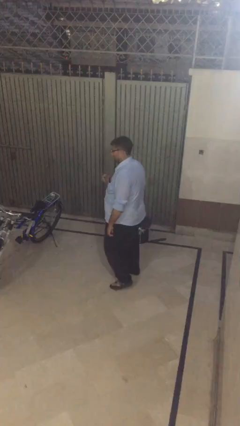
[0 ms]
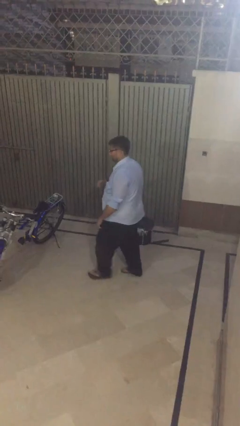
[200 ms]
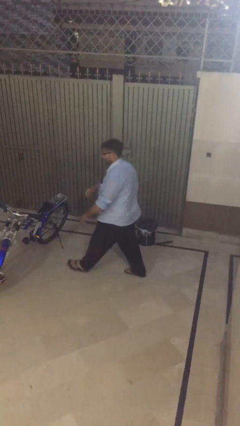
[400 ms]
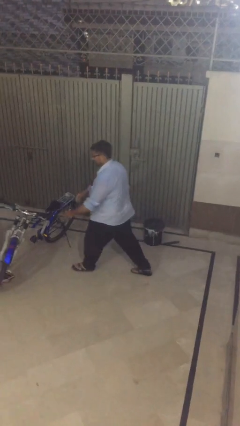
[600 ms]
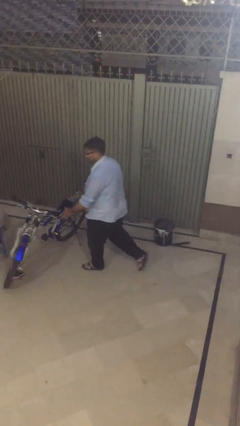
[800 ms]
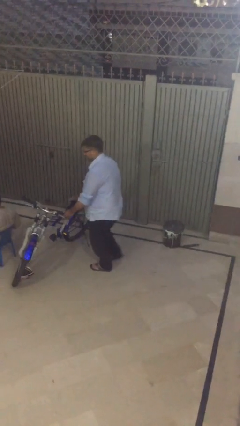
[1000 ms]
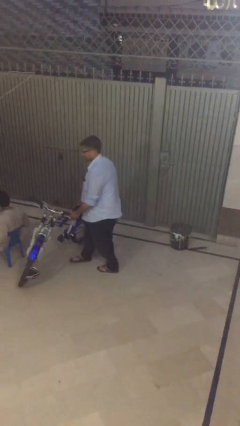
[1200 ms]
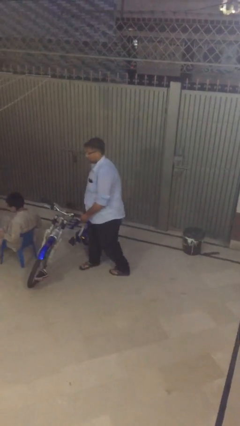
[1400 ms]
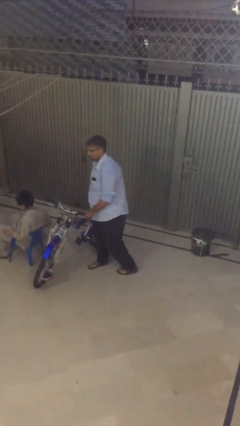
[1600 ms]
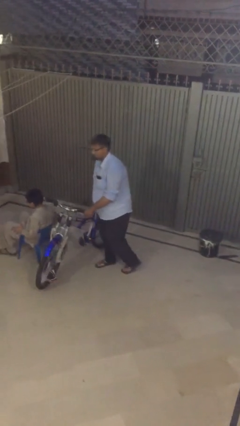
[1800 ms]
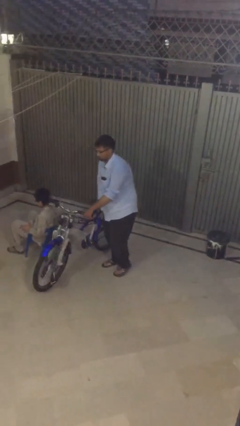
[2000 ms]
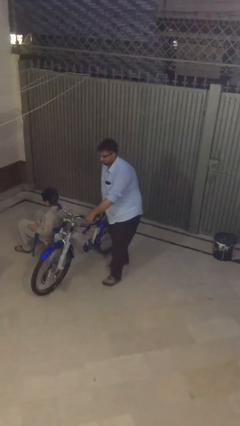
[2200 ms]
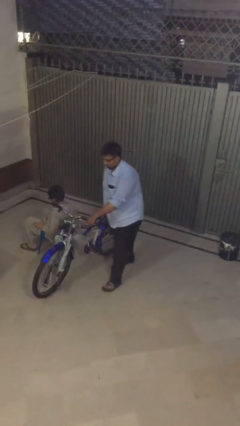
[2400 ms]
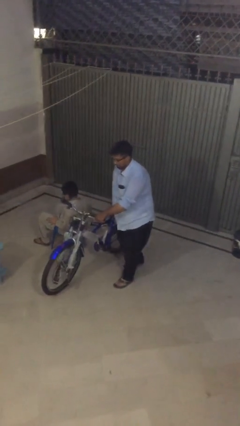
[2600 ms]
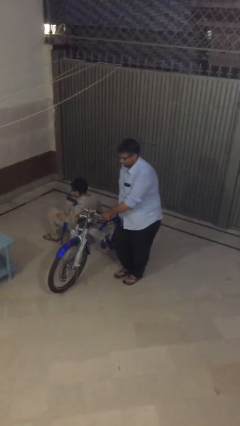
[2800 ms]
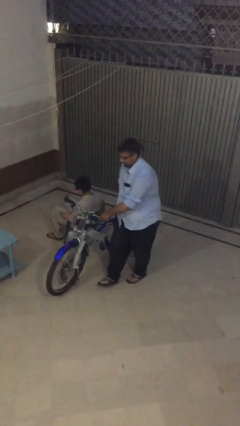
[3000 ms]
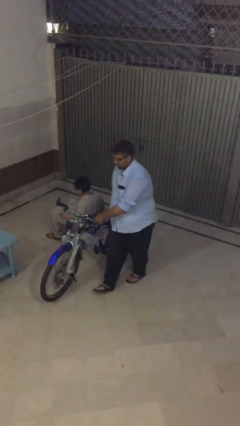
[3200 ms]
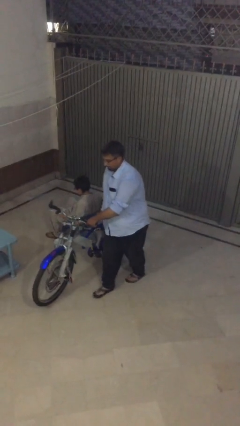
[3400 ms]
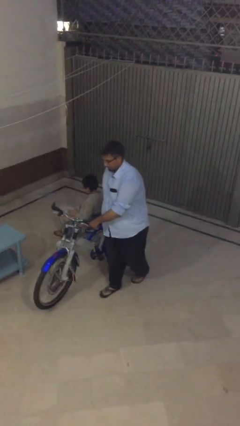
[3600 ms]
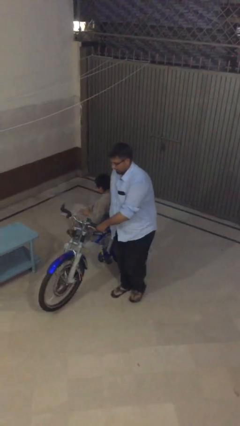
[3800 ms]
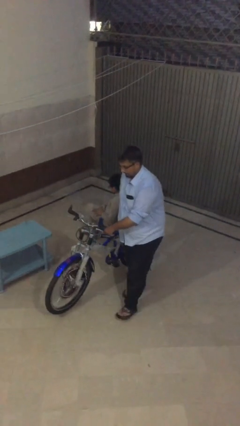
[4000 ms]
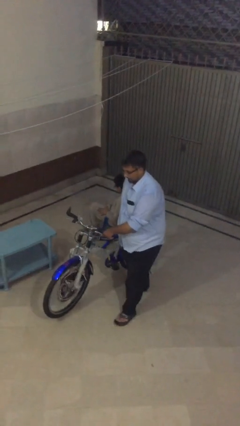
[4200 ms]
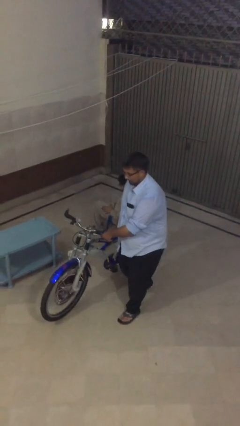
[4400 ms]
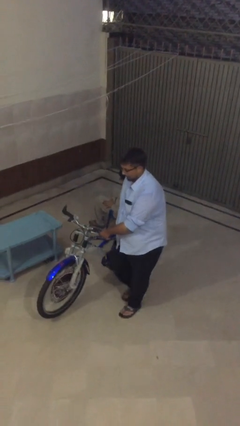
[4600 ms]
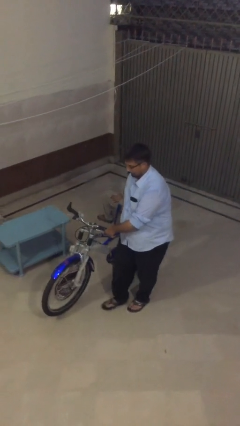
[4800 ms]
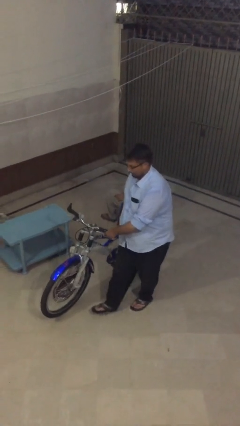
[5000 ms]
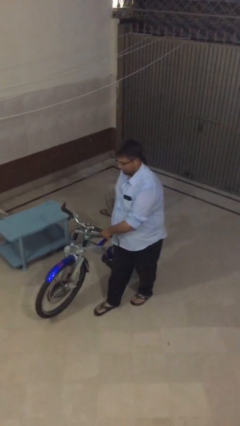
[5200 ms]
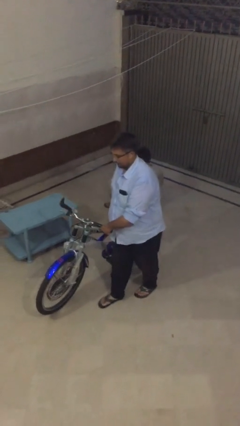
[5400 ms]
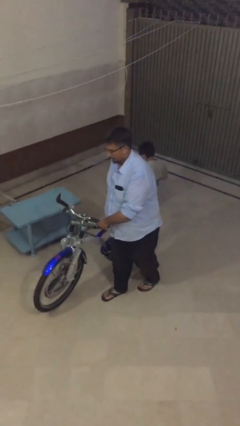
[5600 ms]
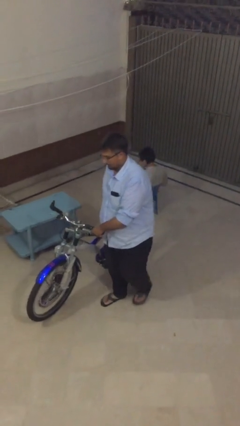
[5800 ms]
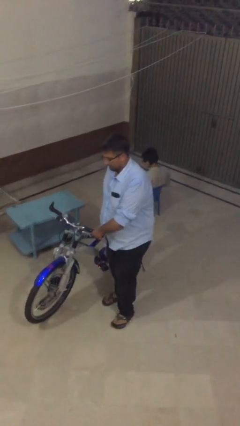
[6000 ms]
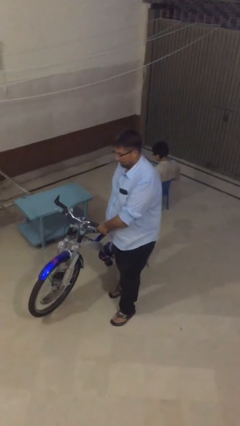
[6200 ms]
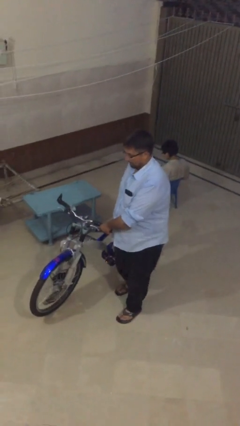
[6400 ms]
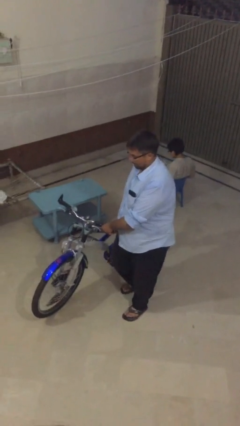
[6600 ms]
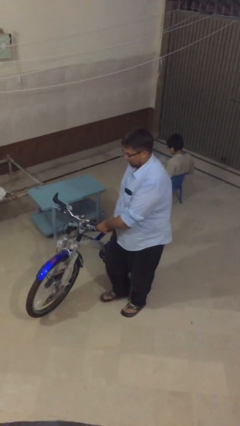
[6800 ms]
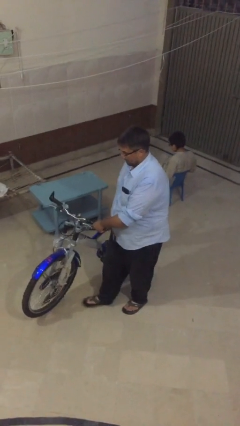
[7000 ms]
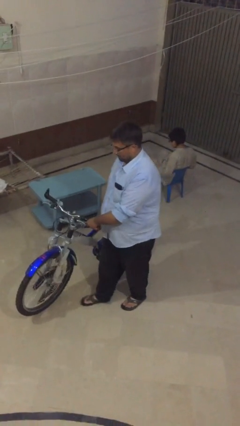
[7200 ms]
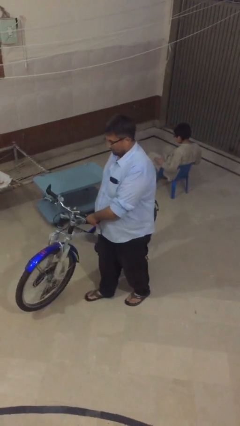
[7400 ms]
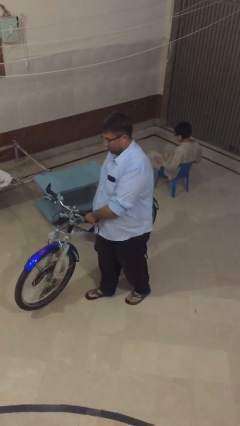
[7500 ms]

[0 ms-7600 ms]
person steals object from person

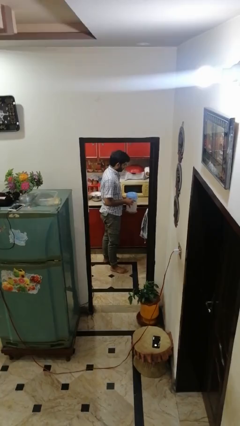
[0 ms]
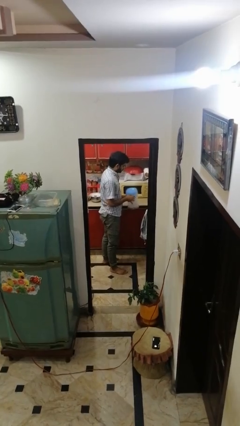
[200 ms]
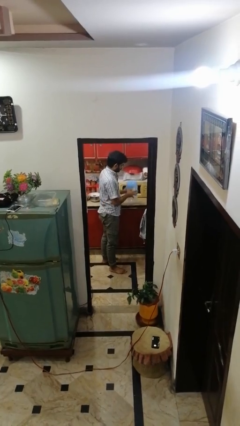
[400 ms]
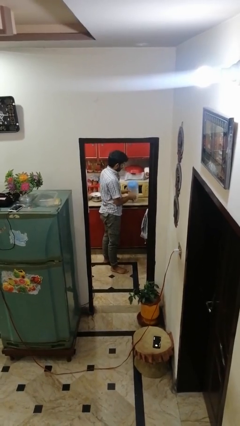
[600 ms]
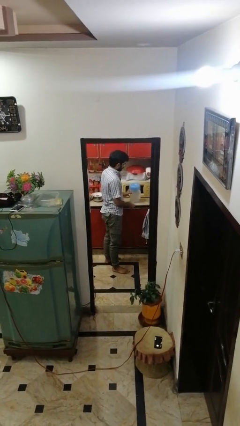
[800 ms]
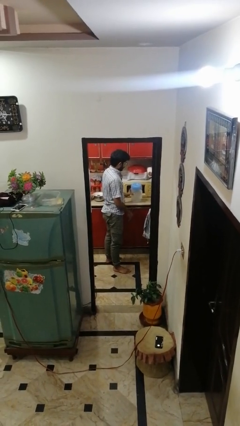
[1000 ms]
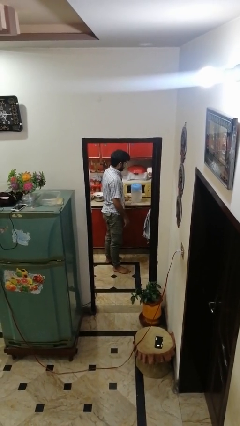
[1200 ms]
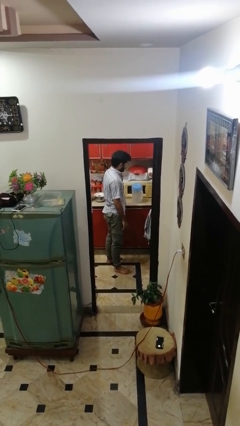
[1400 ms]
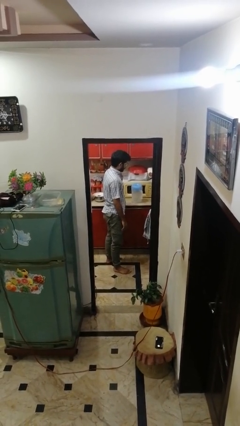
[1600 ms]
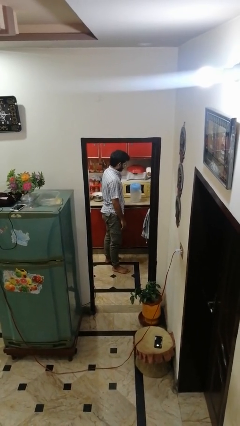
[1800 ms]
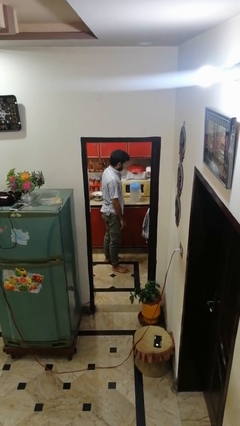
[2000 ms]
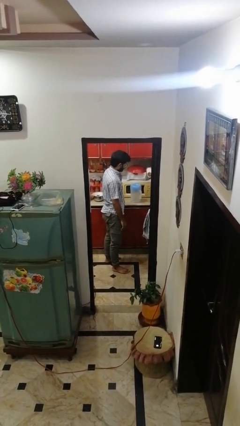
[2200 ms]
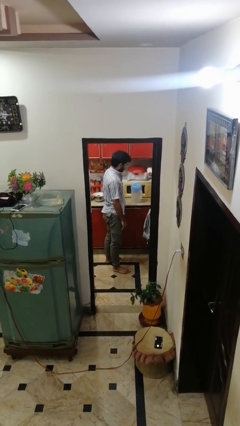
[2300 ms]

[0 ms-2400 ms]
person puts down object on countertop

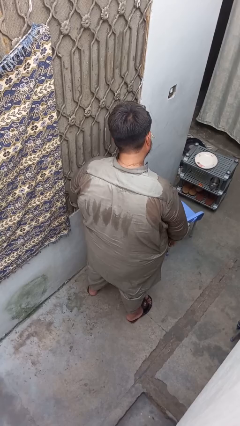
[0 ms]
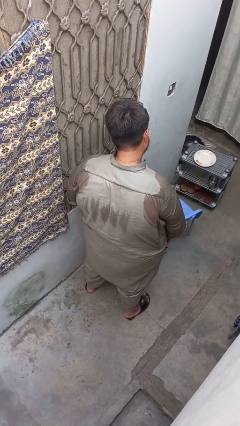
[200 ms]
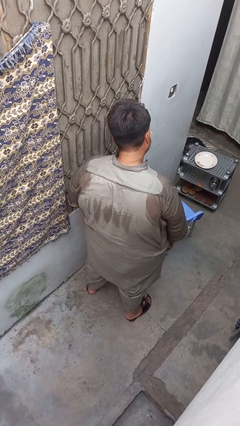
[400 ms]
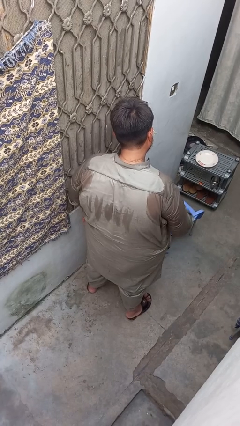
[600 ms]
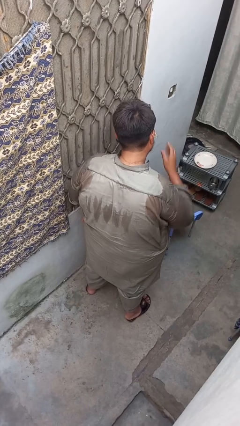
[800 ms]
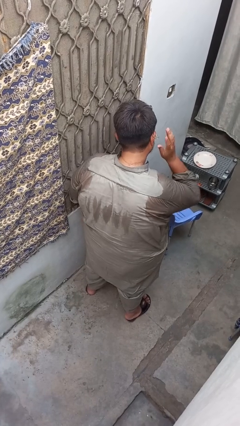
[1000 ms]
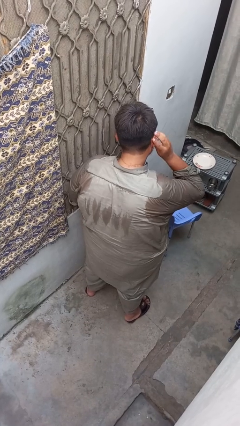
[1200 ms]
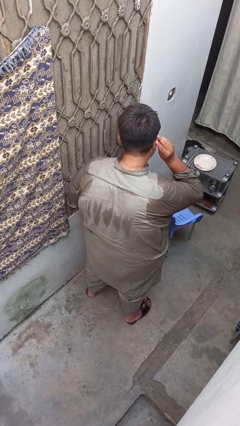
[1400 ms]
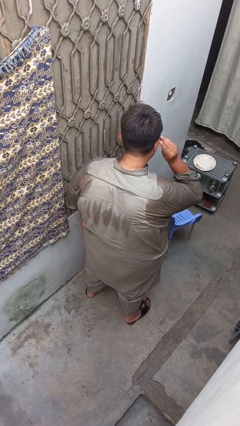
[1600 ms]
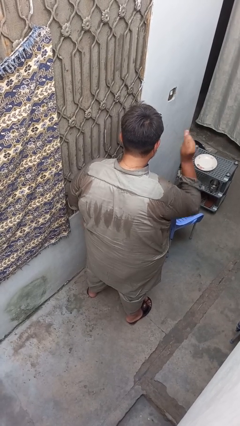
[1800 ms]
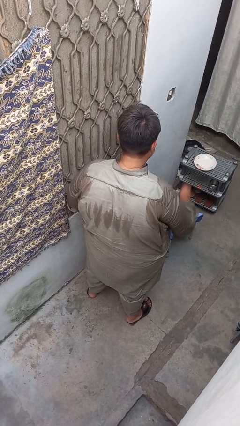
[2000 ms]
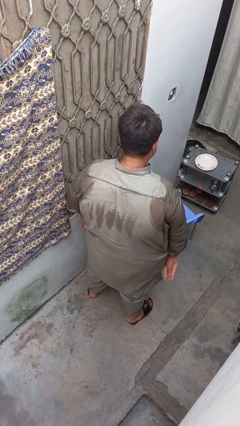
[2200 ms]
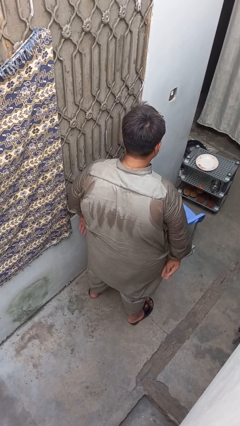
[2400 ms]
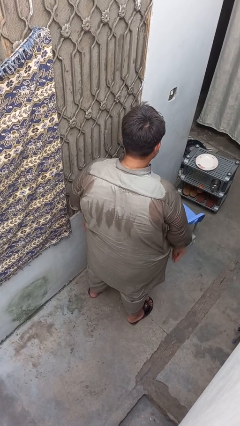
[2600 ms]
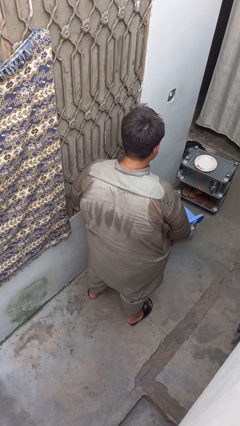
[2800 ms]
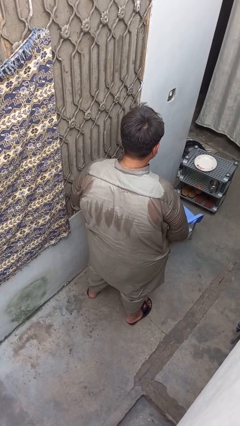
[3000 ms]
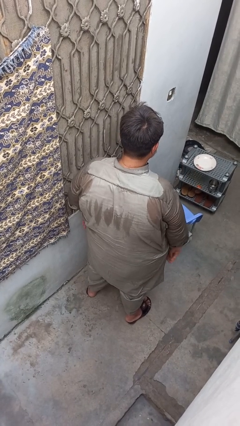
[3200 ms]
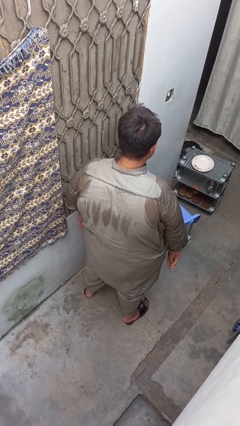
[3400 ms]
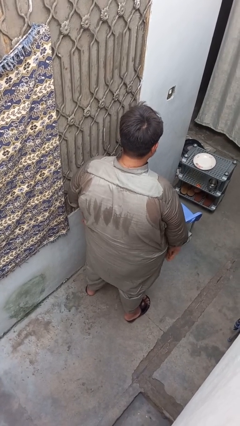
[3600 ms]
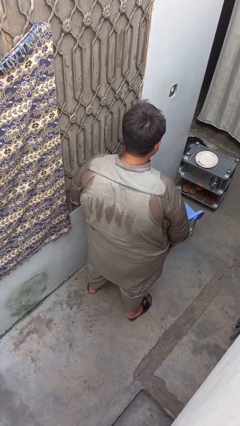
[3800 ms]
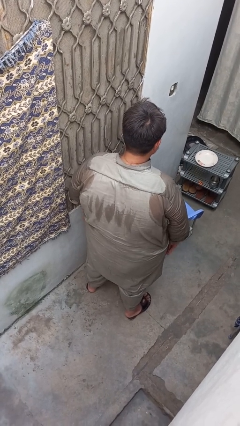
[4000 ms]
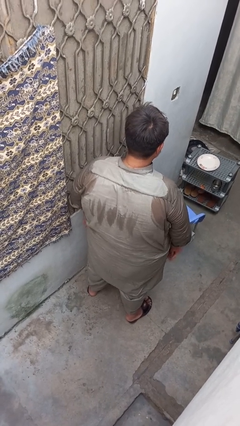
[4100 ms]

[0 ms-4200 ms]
person takes off earrings

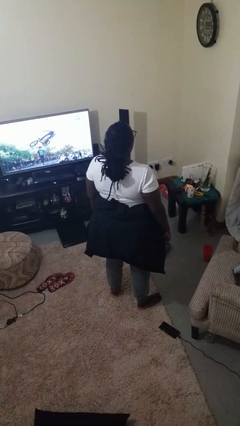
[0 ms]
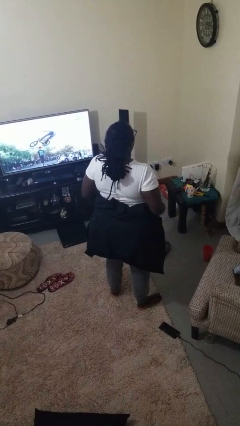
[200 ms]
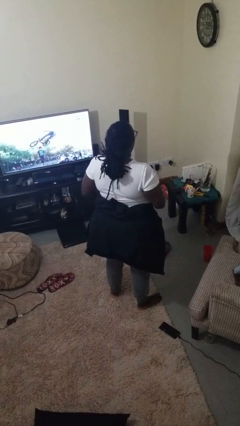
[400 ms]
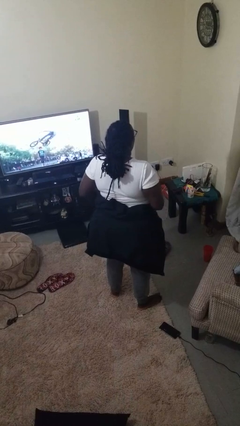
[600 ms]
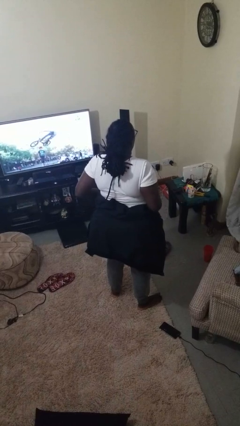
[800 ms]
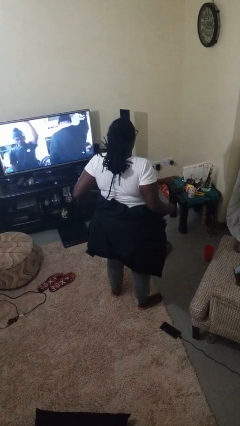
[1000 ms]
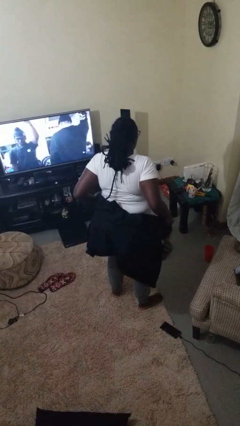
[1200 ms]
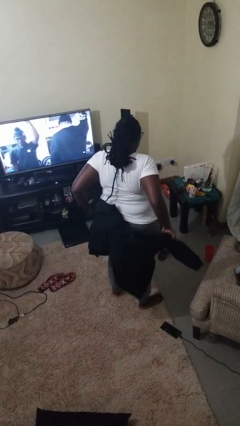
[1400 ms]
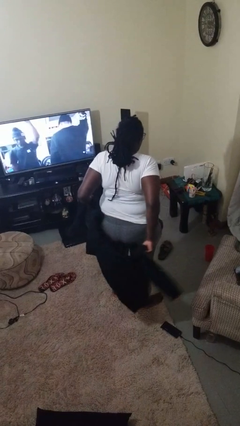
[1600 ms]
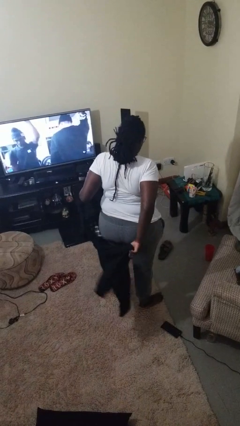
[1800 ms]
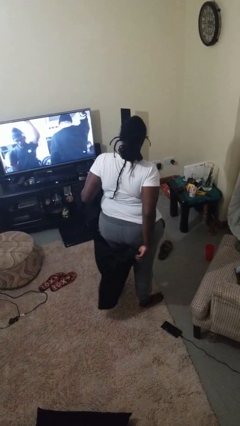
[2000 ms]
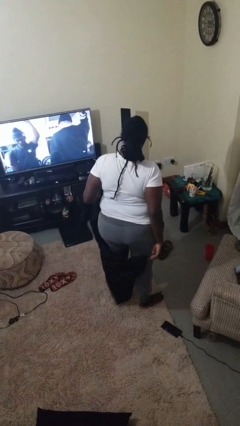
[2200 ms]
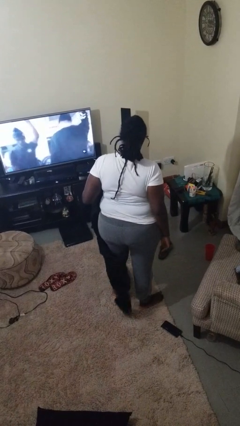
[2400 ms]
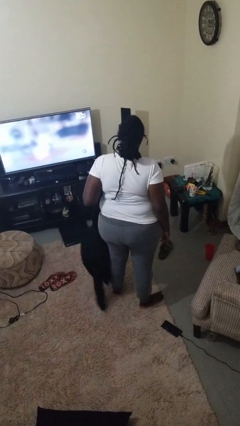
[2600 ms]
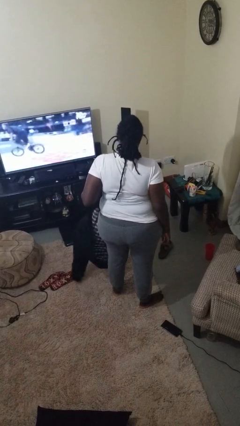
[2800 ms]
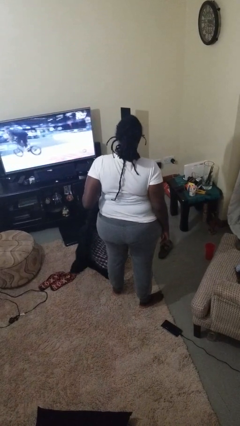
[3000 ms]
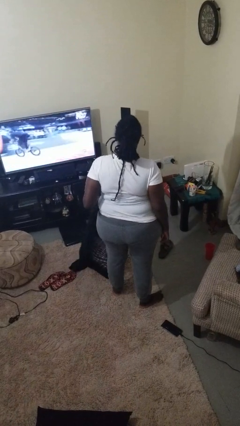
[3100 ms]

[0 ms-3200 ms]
person unties jacket around waist

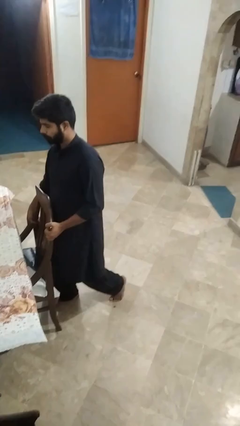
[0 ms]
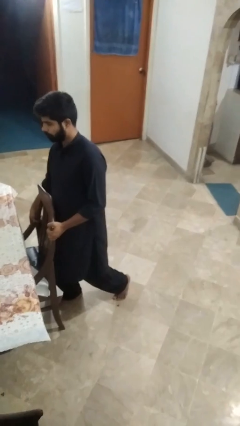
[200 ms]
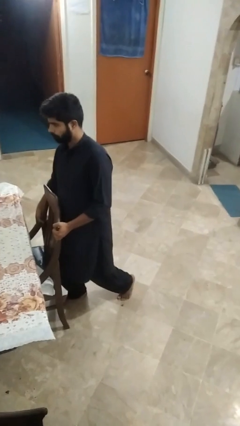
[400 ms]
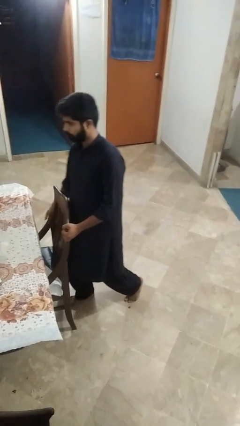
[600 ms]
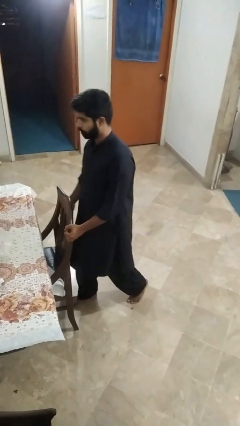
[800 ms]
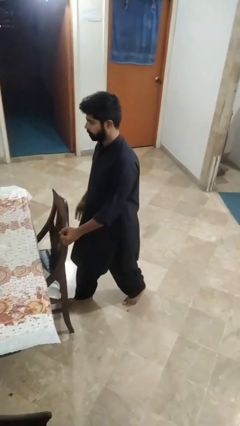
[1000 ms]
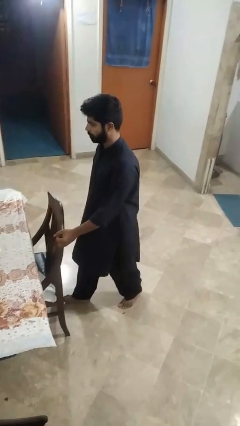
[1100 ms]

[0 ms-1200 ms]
person pushes in chair
